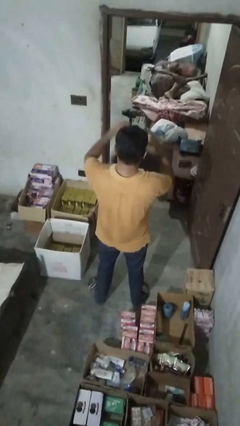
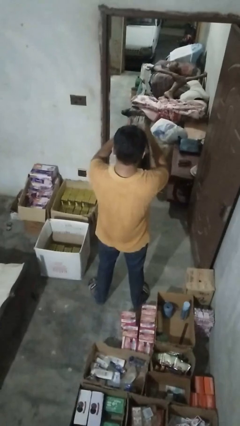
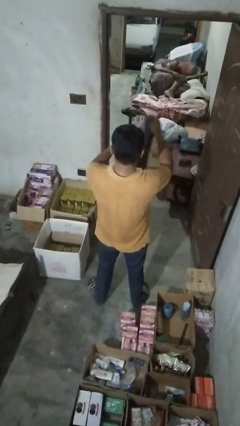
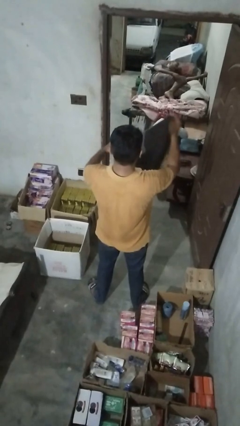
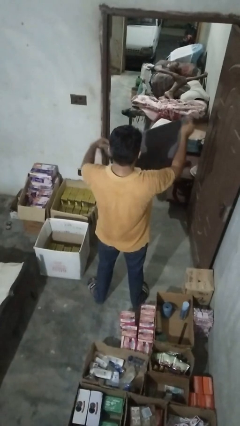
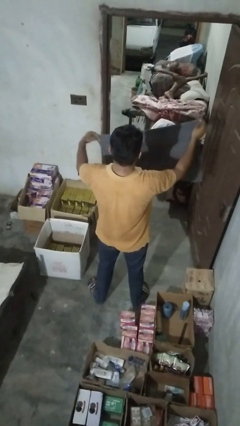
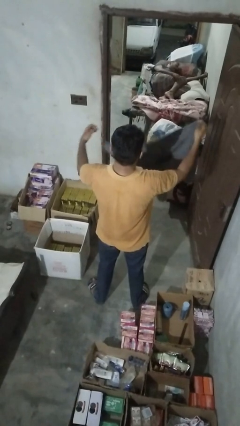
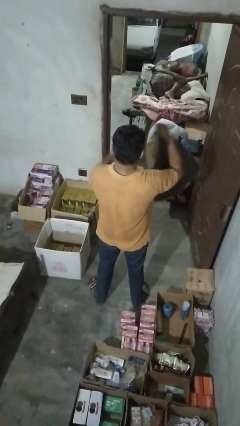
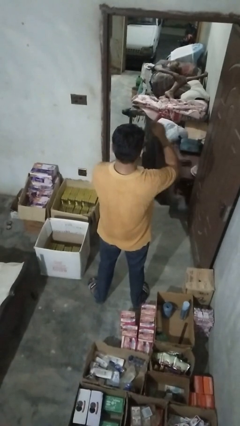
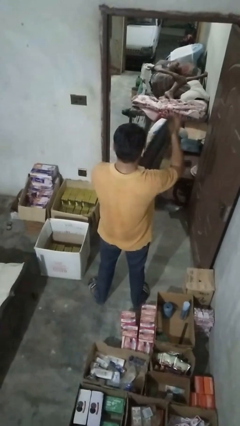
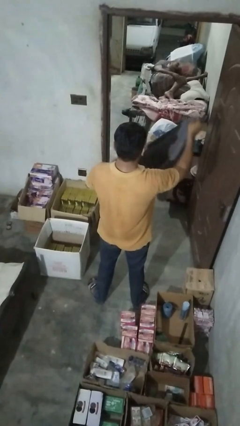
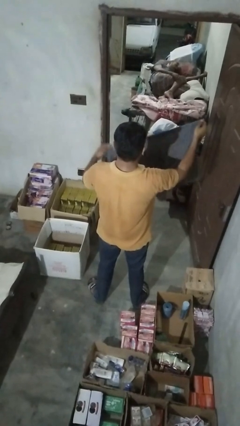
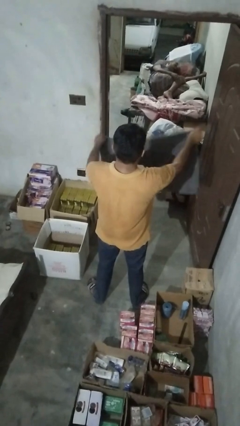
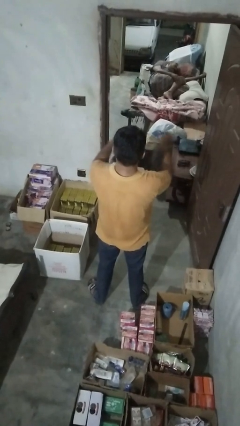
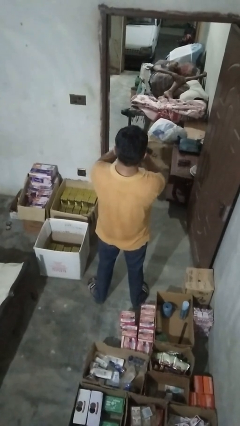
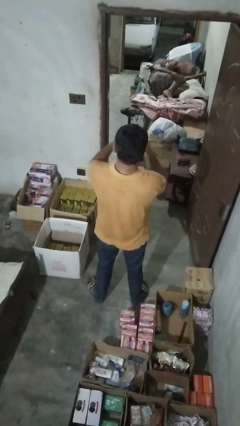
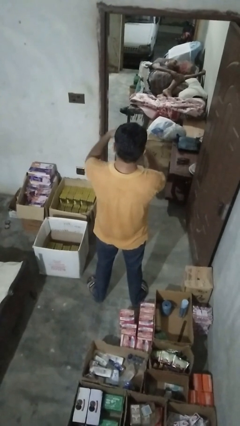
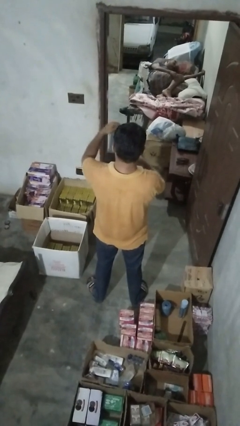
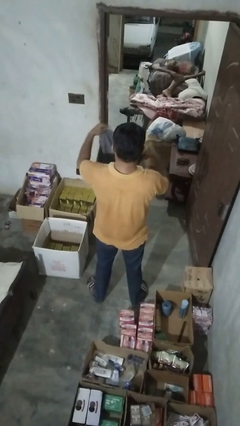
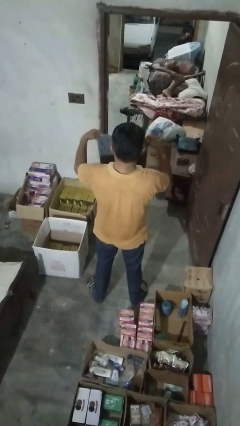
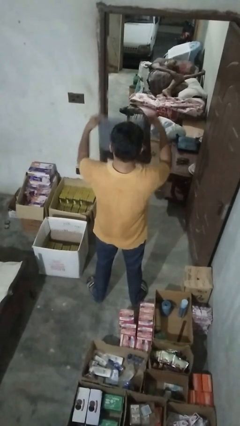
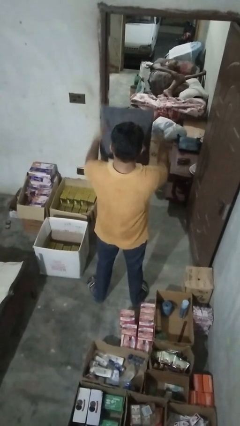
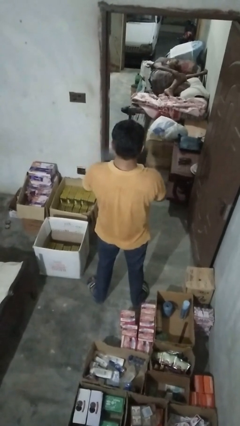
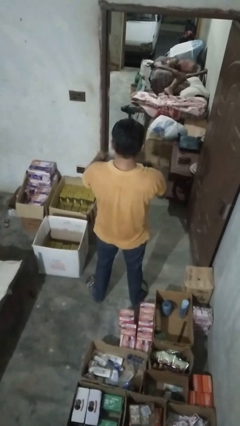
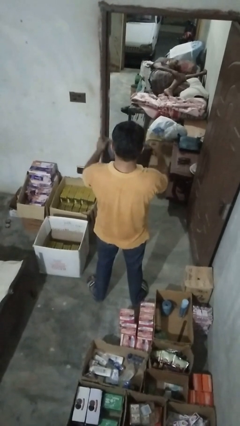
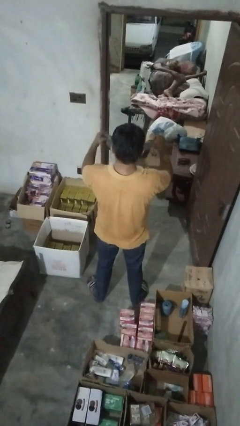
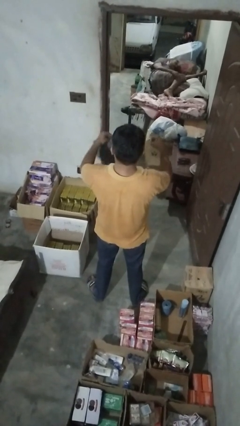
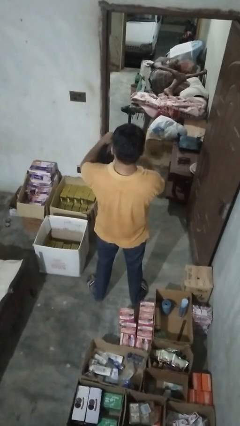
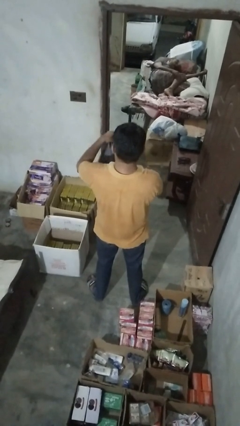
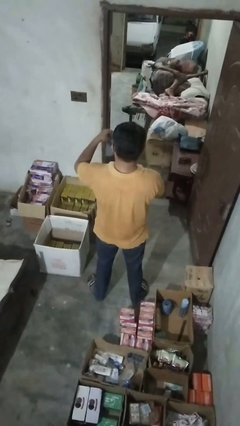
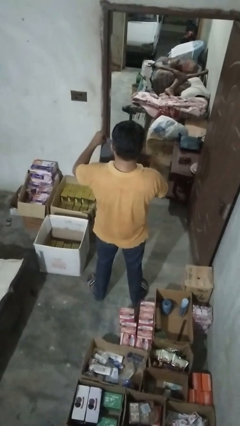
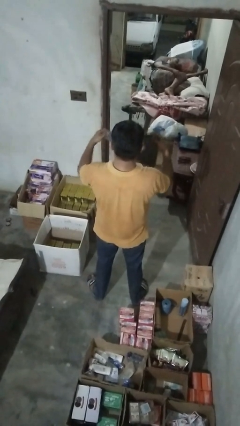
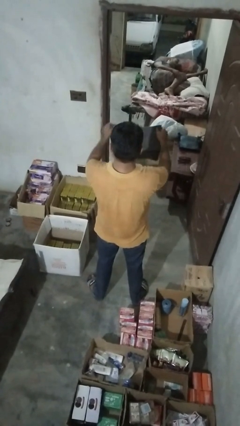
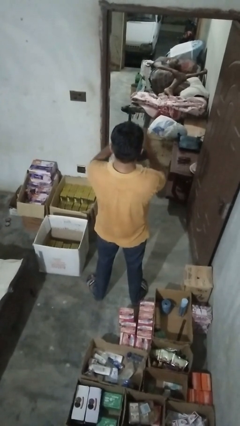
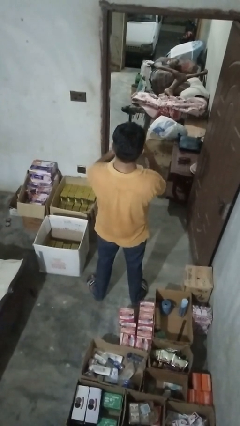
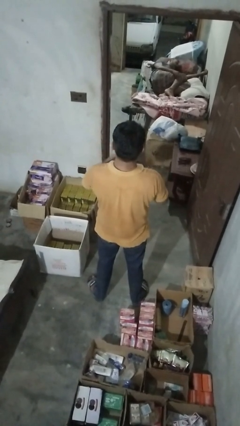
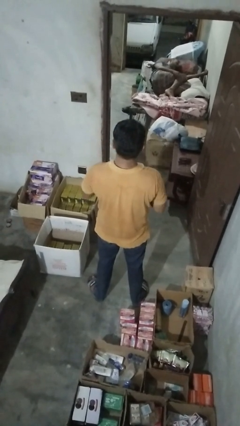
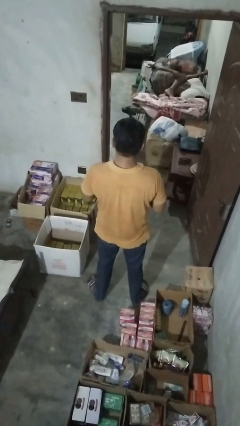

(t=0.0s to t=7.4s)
person folds towel

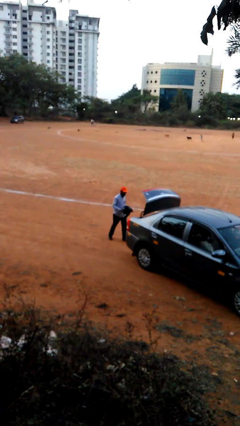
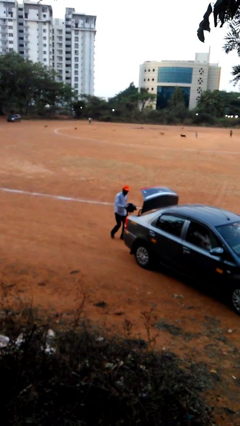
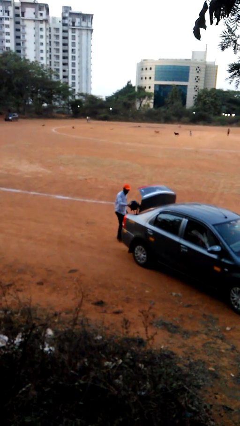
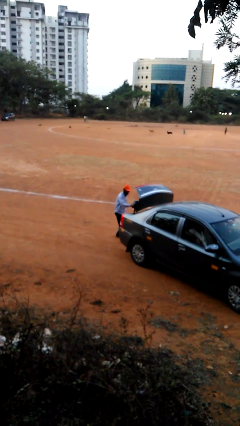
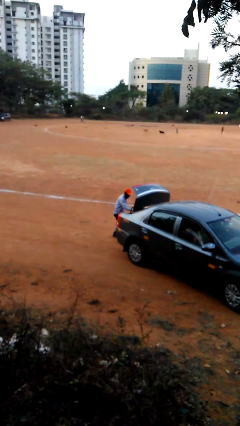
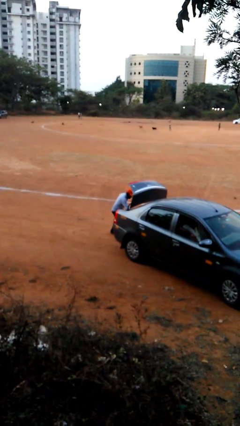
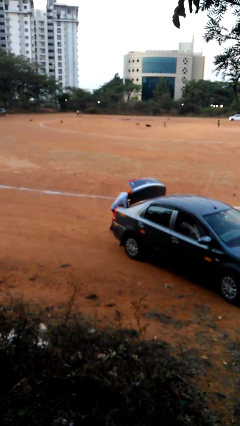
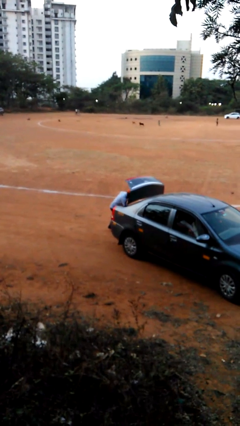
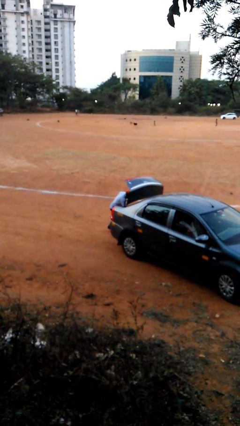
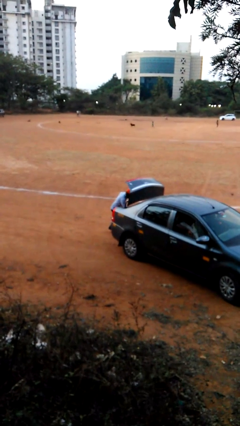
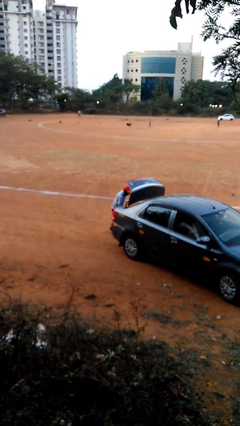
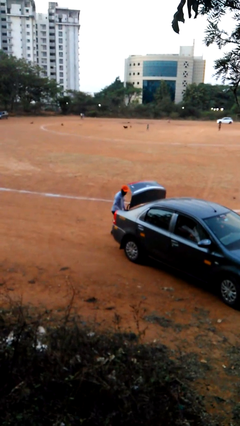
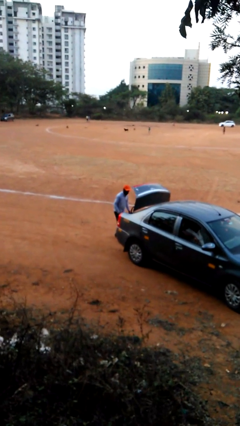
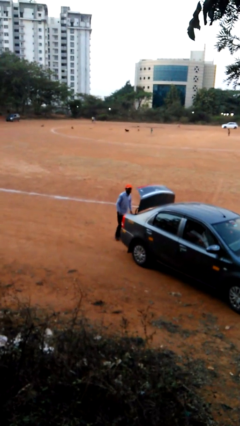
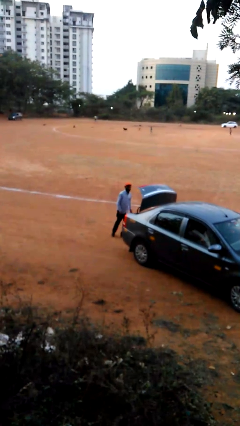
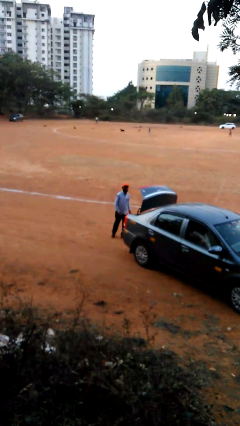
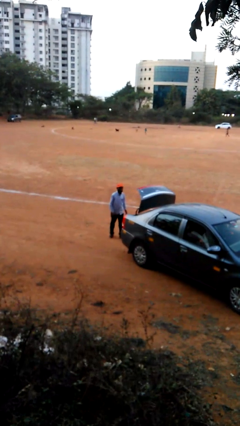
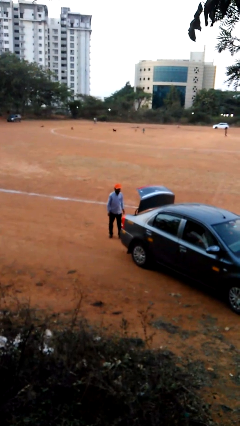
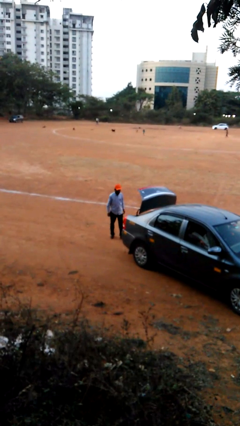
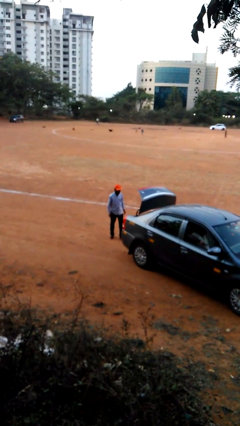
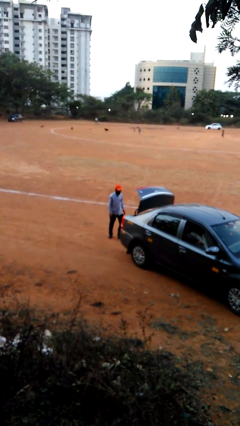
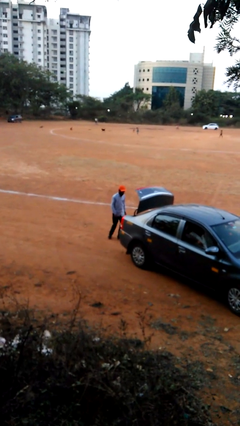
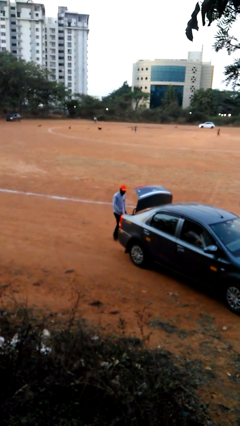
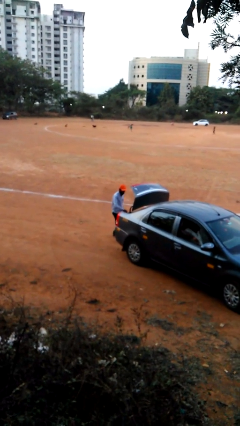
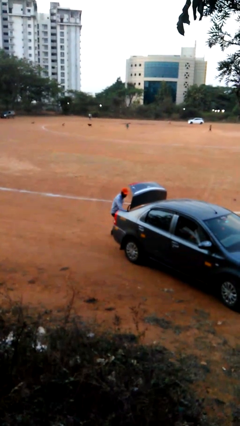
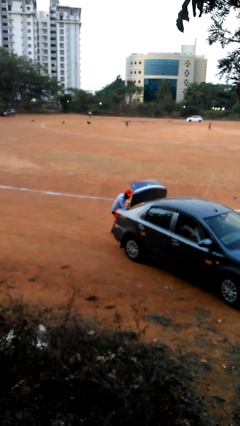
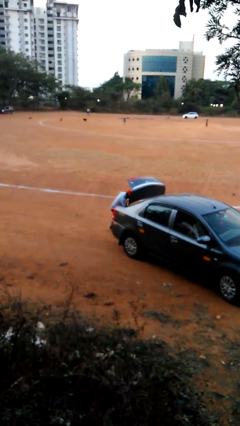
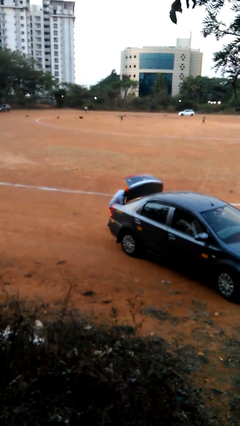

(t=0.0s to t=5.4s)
person loads car

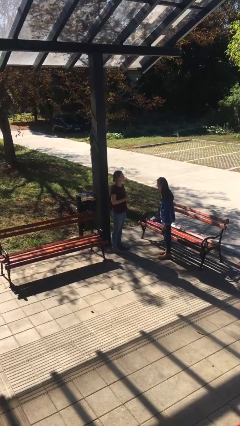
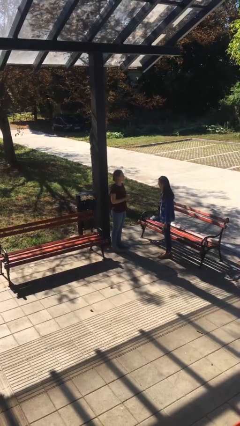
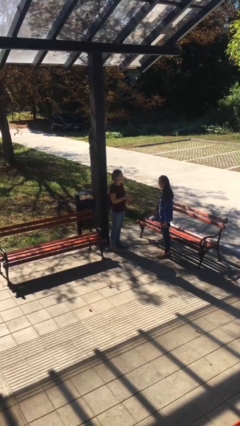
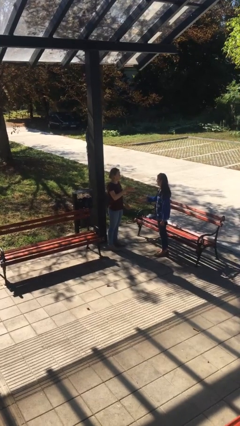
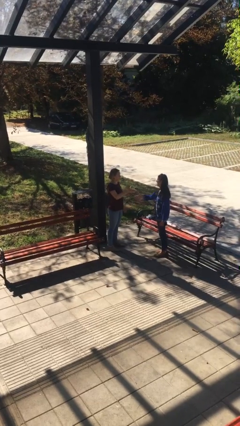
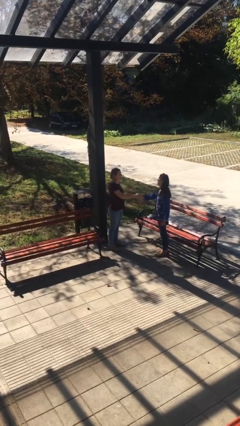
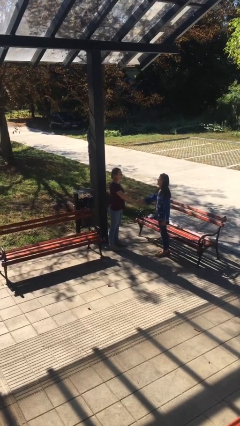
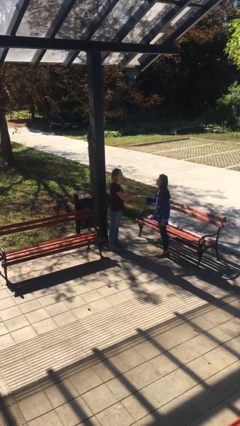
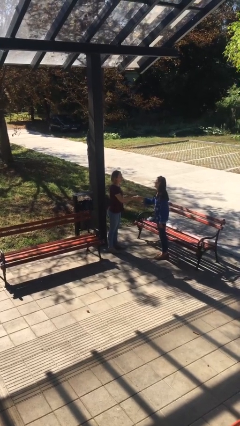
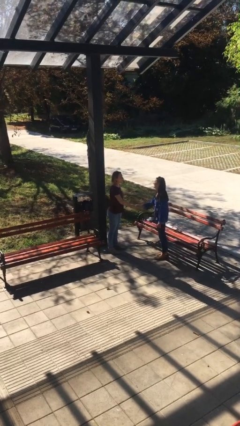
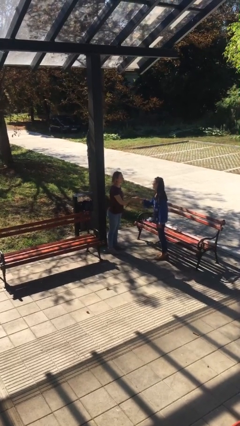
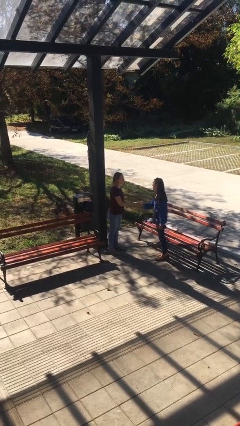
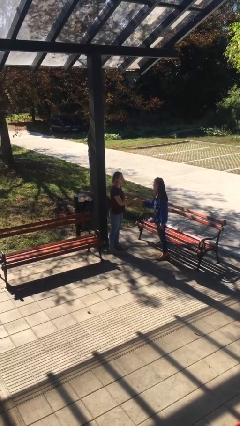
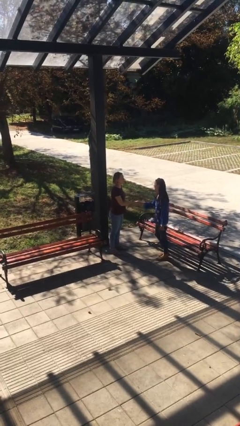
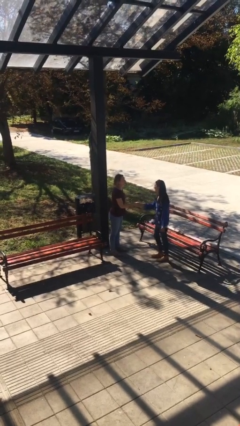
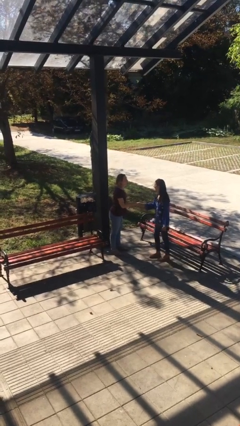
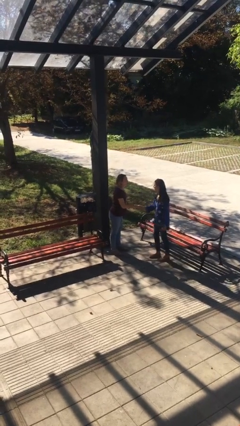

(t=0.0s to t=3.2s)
person shakes hand

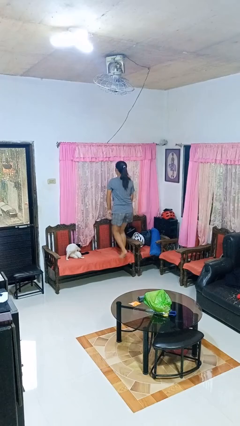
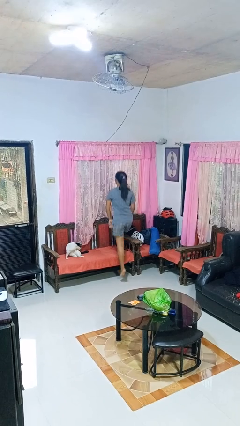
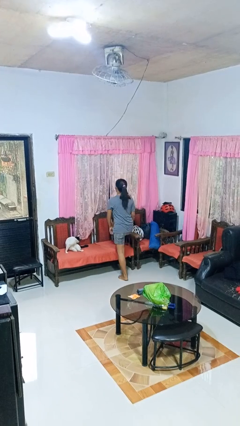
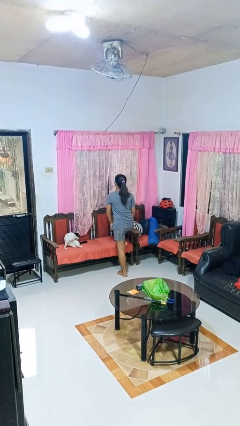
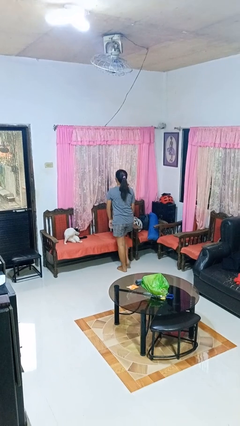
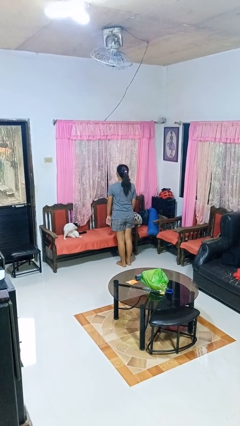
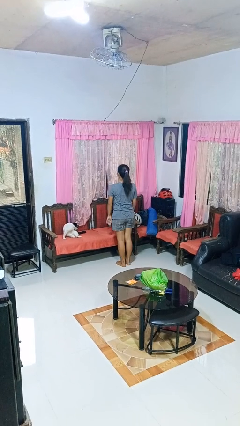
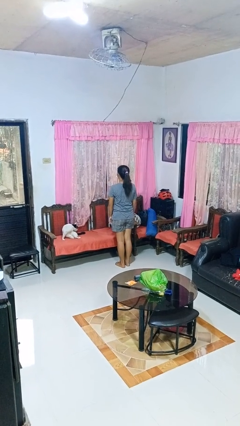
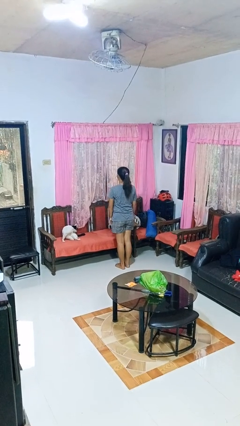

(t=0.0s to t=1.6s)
person climbs off chair
